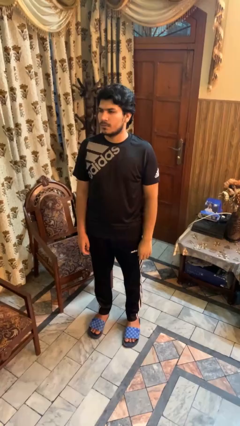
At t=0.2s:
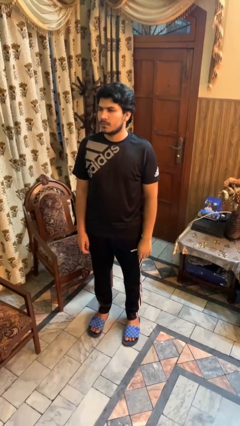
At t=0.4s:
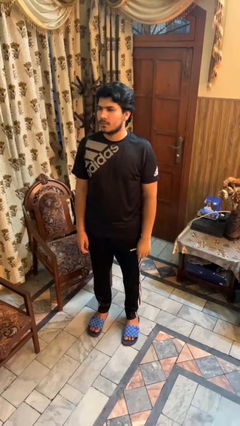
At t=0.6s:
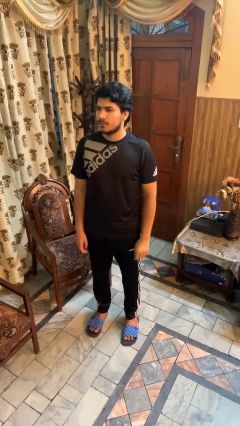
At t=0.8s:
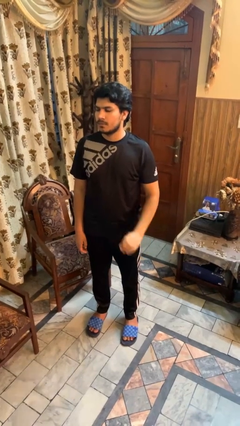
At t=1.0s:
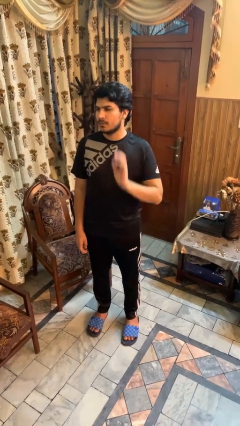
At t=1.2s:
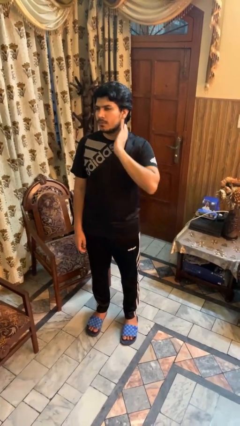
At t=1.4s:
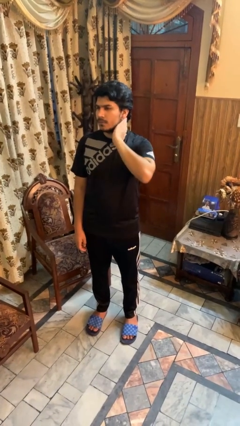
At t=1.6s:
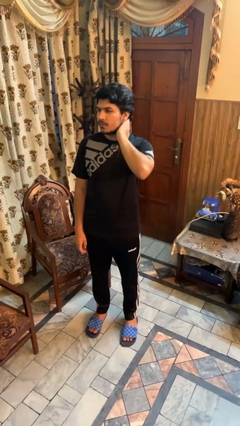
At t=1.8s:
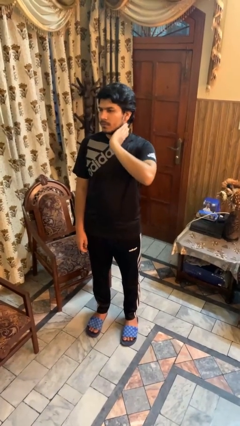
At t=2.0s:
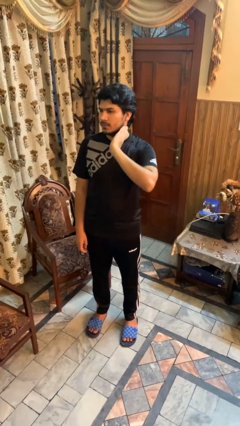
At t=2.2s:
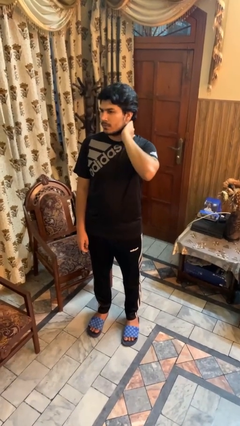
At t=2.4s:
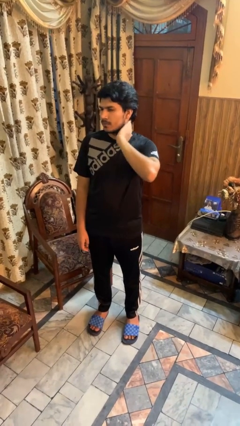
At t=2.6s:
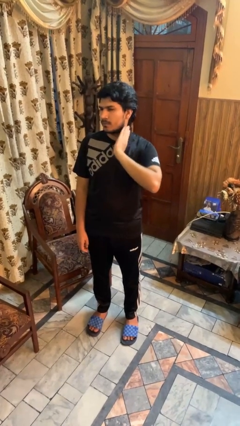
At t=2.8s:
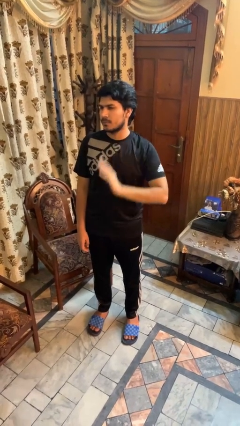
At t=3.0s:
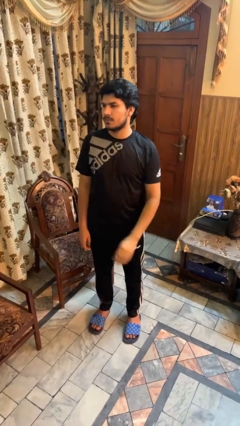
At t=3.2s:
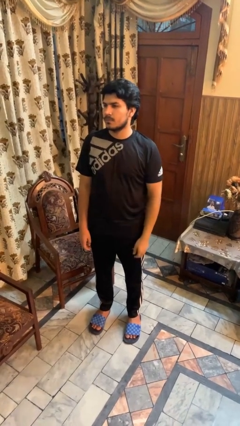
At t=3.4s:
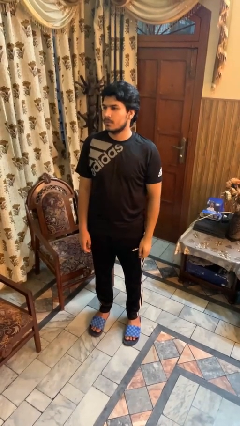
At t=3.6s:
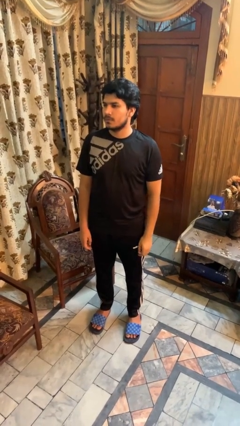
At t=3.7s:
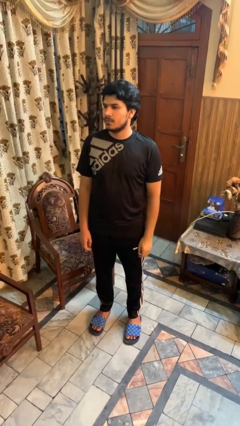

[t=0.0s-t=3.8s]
person rubs neck

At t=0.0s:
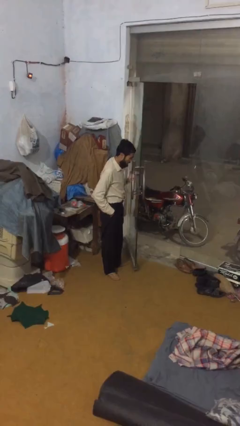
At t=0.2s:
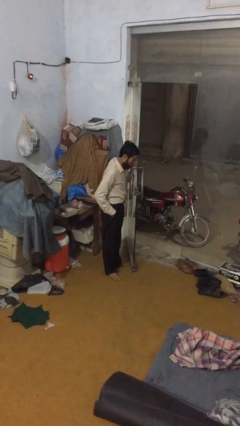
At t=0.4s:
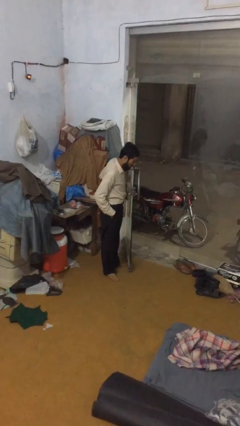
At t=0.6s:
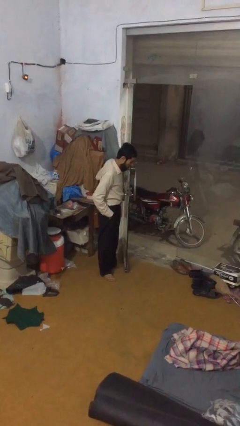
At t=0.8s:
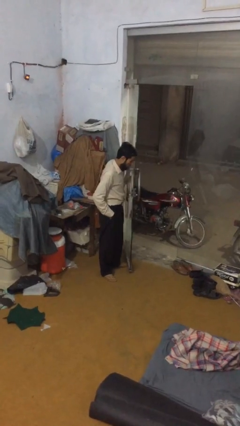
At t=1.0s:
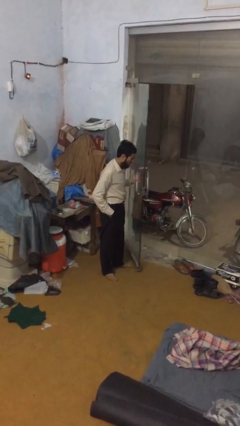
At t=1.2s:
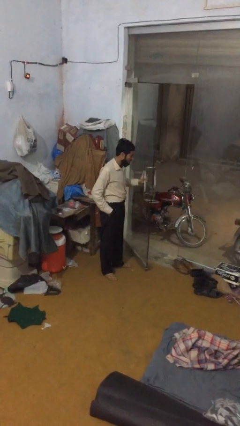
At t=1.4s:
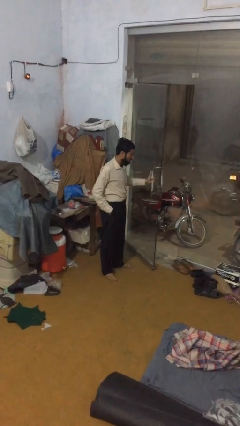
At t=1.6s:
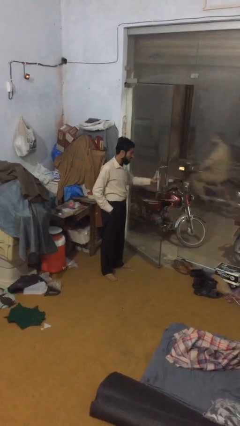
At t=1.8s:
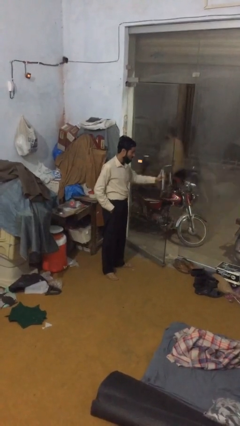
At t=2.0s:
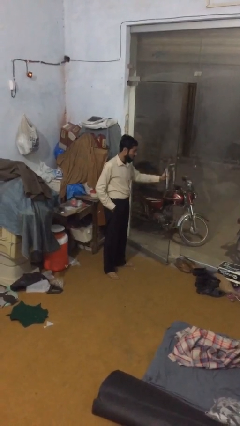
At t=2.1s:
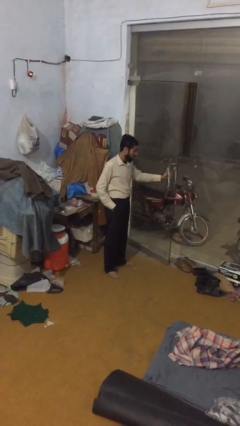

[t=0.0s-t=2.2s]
person closes facility door

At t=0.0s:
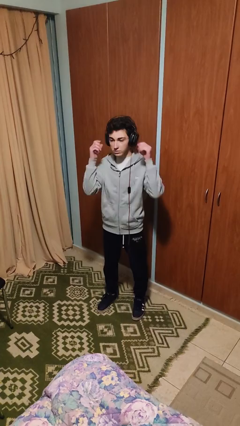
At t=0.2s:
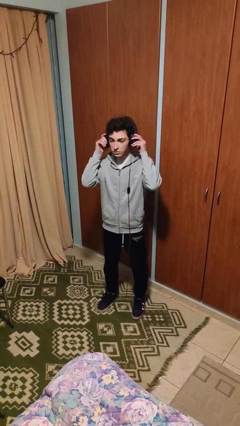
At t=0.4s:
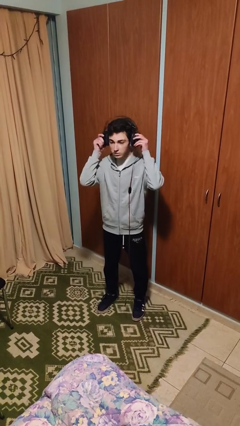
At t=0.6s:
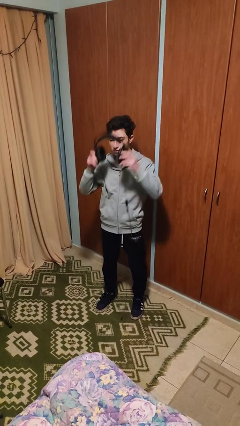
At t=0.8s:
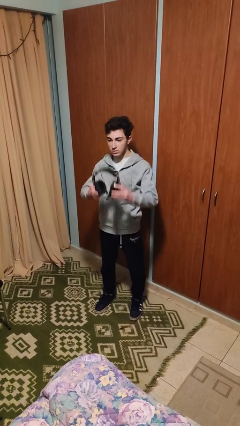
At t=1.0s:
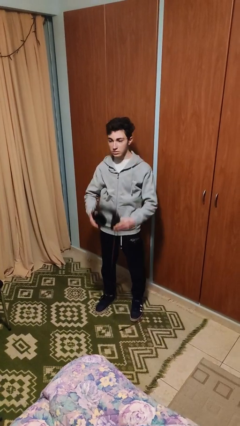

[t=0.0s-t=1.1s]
person takes off headphones

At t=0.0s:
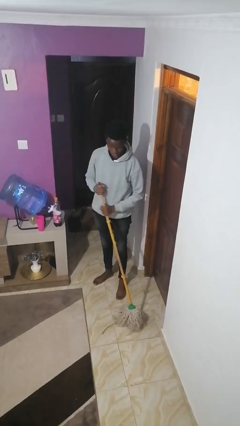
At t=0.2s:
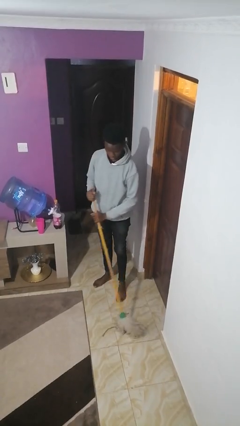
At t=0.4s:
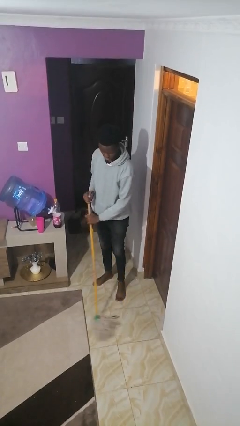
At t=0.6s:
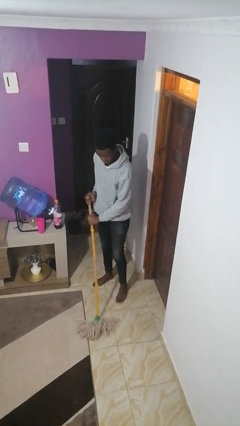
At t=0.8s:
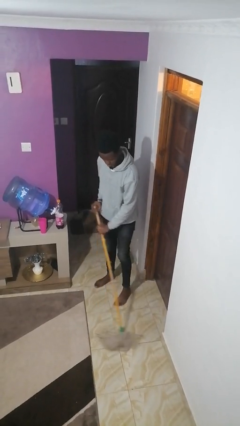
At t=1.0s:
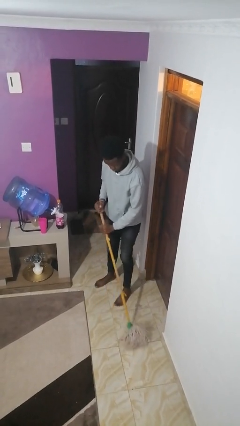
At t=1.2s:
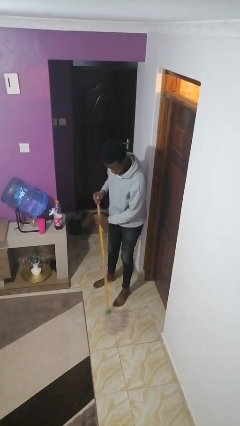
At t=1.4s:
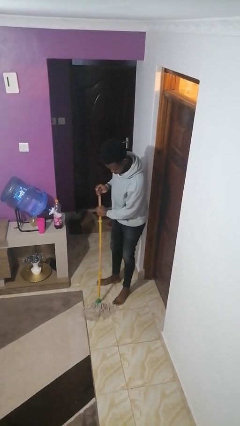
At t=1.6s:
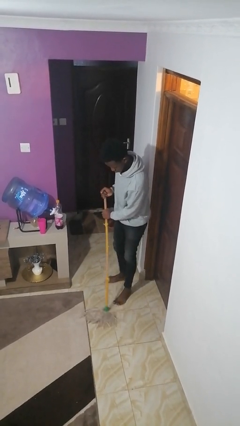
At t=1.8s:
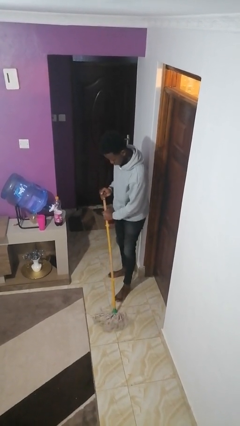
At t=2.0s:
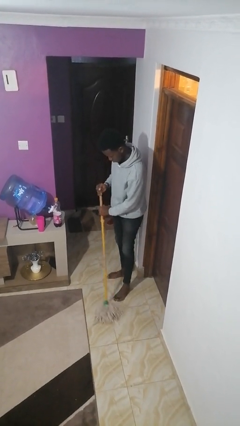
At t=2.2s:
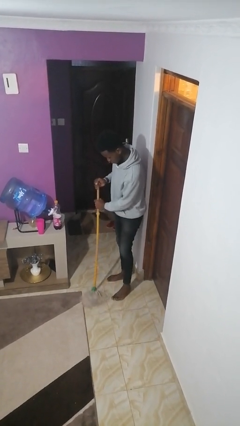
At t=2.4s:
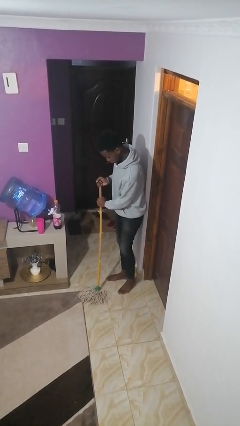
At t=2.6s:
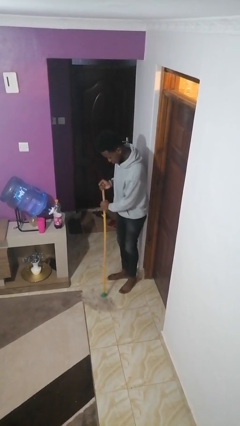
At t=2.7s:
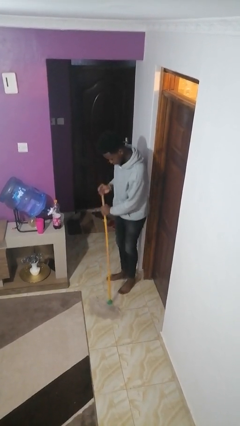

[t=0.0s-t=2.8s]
person mops

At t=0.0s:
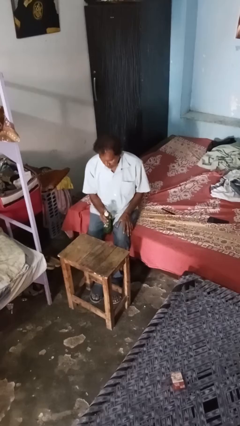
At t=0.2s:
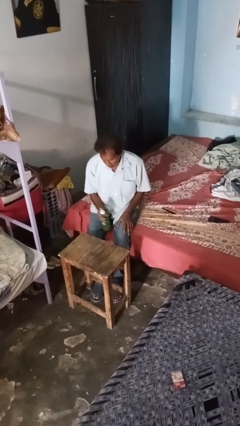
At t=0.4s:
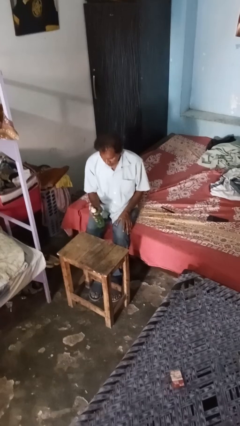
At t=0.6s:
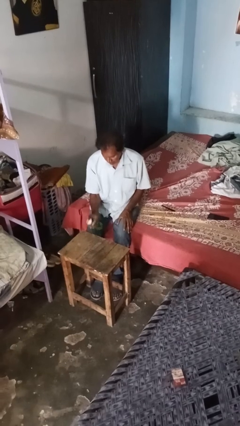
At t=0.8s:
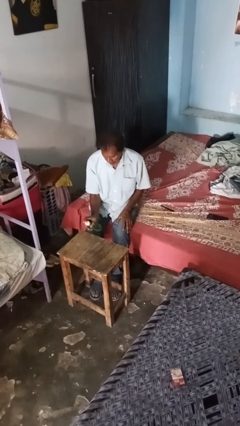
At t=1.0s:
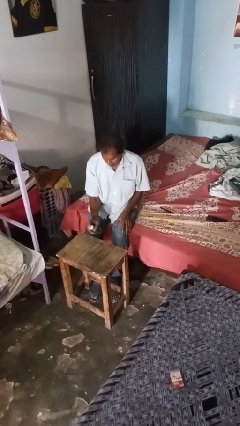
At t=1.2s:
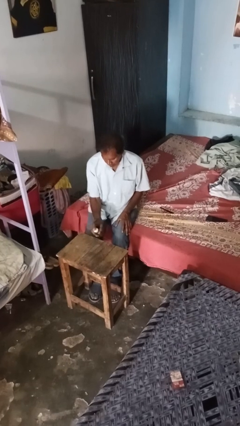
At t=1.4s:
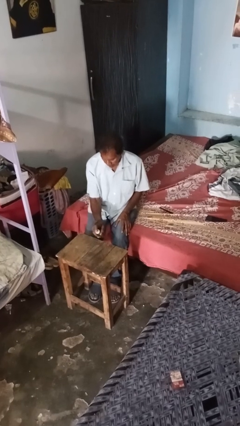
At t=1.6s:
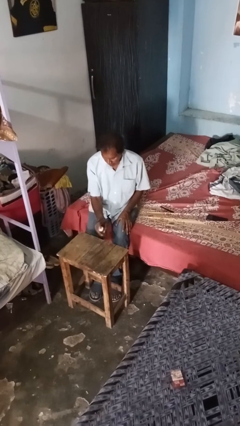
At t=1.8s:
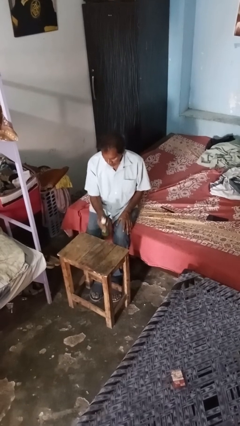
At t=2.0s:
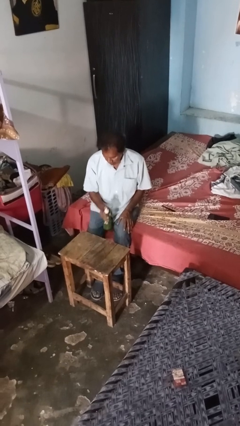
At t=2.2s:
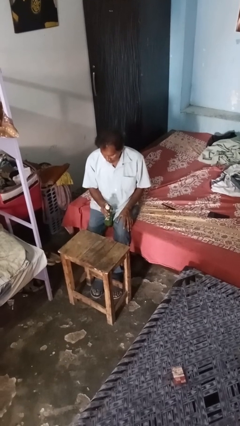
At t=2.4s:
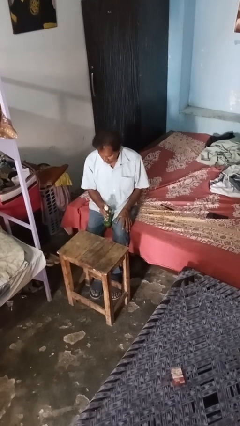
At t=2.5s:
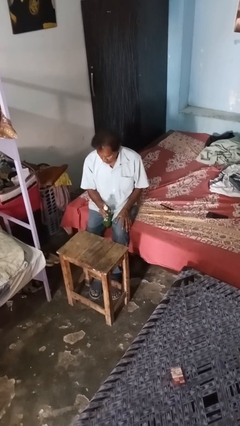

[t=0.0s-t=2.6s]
person sprays from bottle

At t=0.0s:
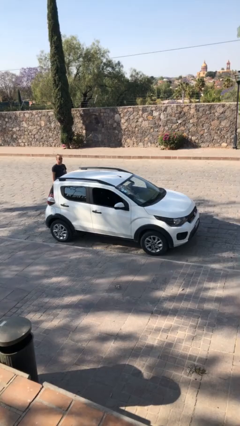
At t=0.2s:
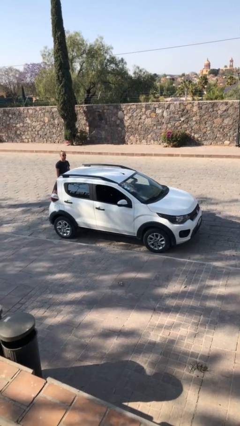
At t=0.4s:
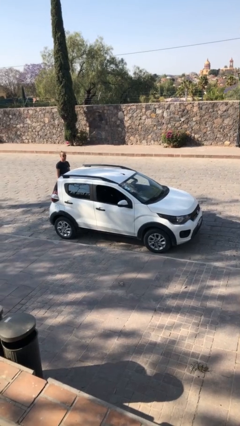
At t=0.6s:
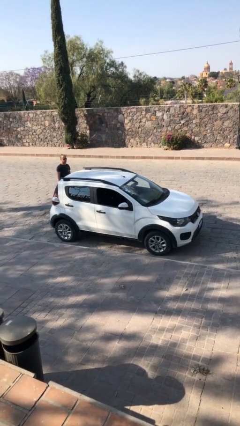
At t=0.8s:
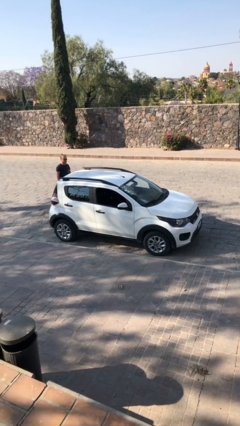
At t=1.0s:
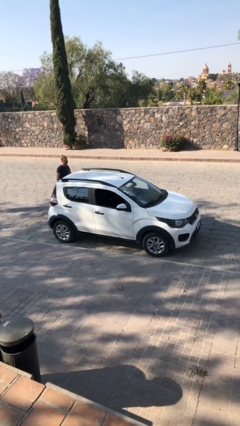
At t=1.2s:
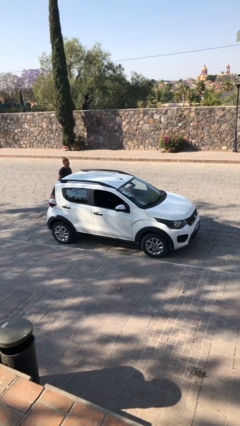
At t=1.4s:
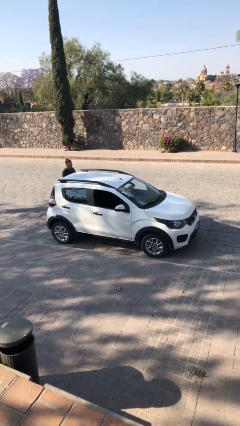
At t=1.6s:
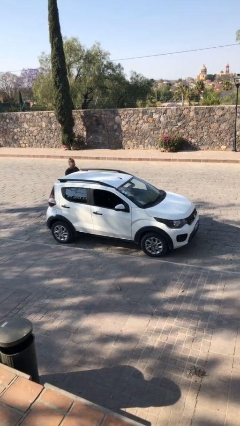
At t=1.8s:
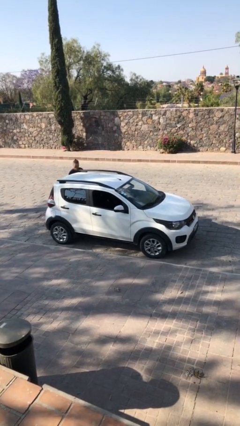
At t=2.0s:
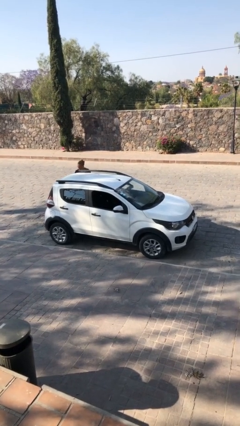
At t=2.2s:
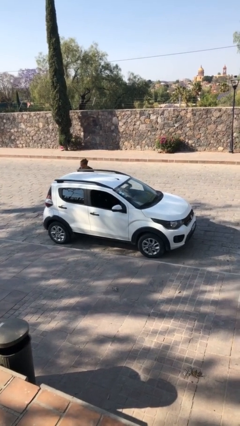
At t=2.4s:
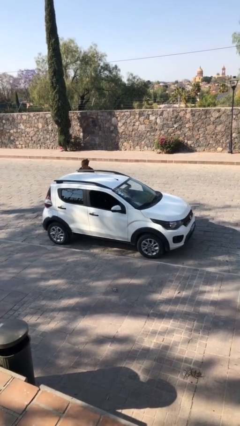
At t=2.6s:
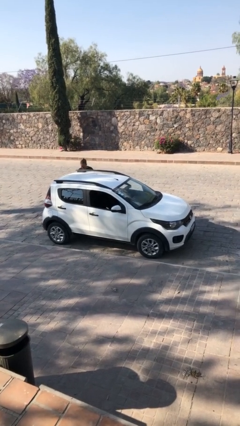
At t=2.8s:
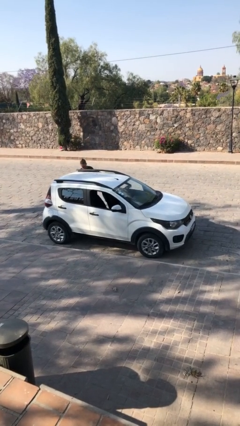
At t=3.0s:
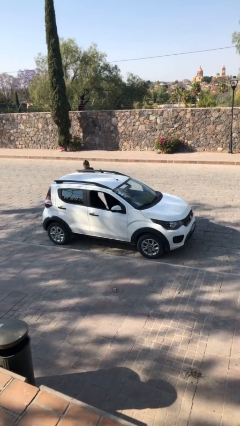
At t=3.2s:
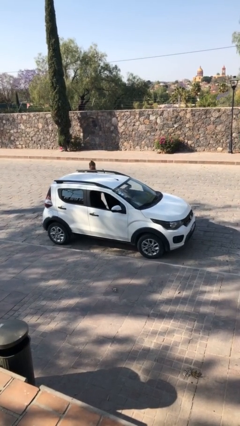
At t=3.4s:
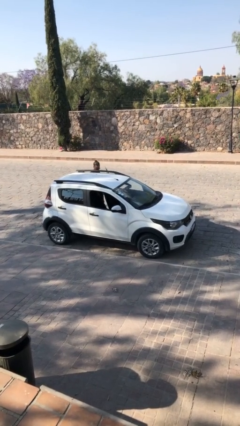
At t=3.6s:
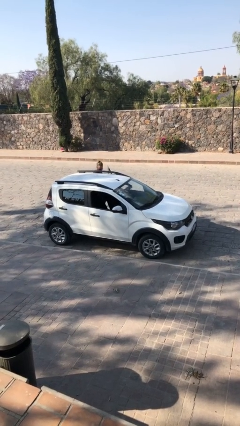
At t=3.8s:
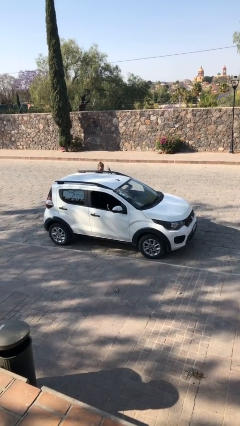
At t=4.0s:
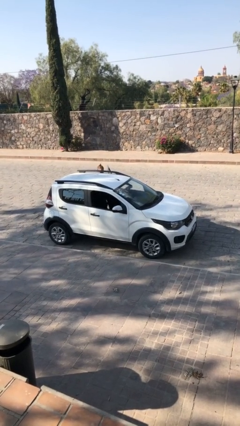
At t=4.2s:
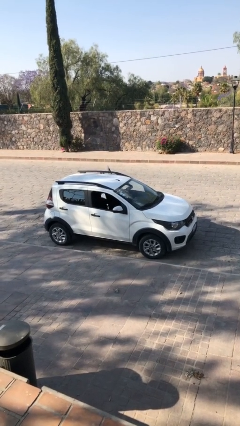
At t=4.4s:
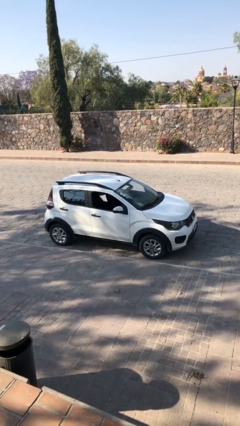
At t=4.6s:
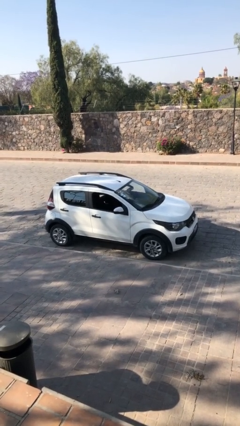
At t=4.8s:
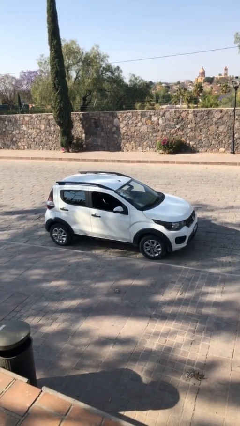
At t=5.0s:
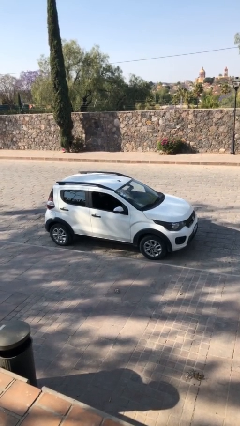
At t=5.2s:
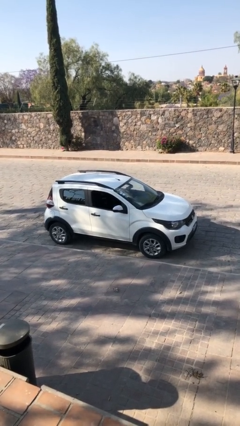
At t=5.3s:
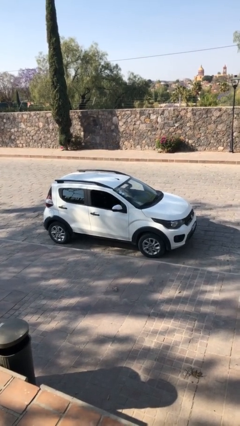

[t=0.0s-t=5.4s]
car picks up person
